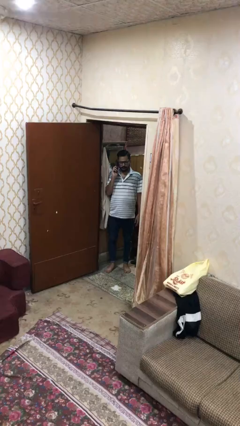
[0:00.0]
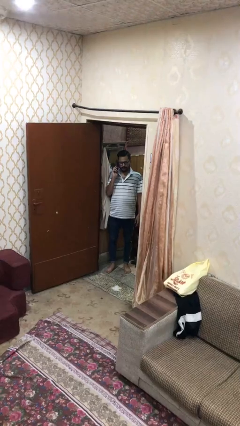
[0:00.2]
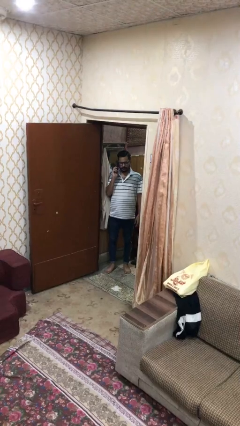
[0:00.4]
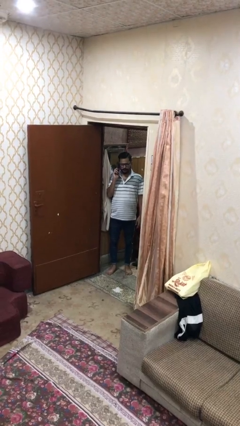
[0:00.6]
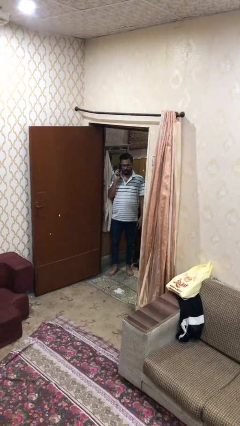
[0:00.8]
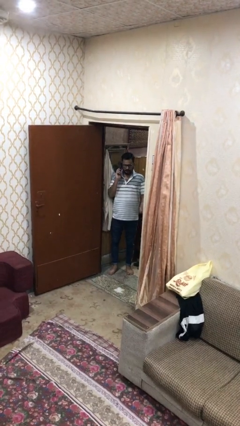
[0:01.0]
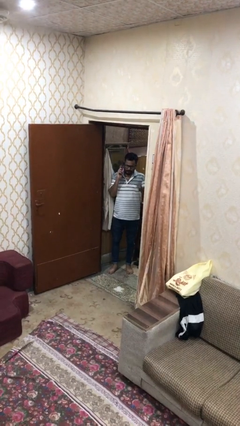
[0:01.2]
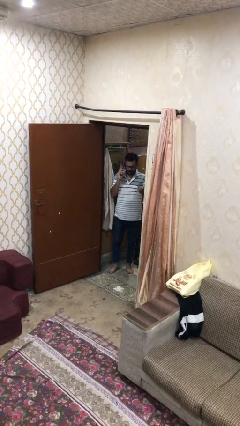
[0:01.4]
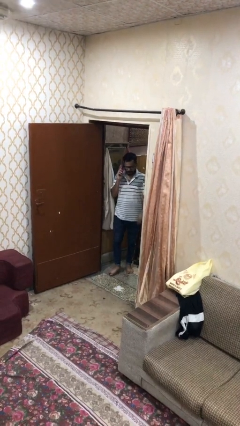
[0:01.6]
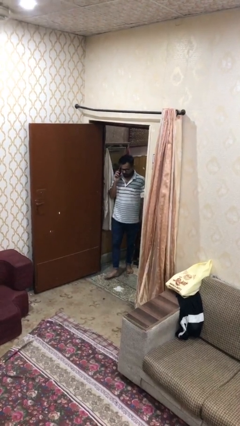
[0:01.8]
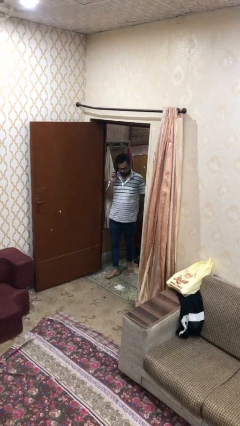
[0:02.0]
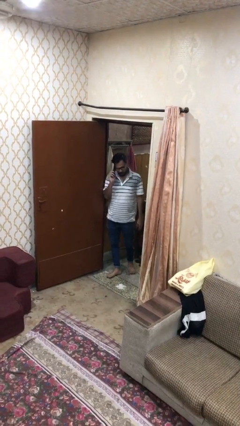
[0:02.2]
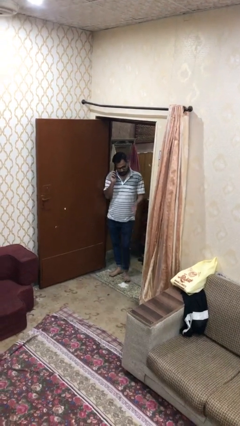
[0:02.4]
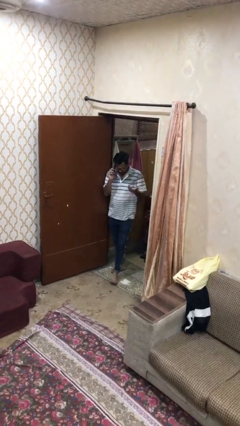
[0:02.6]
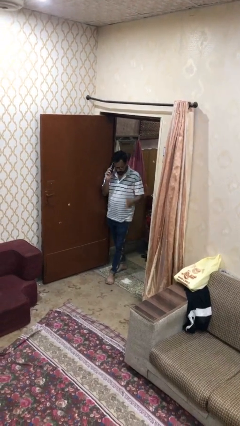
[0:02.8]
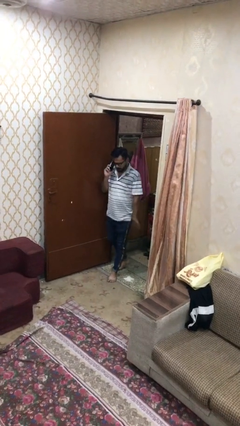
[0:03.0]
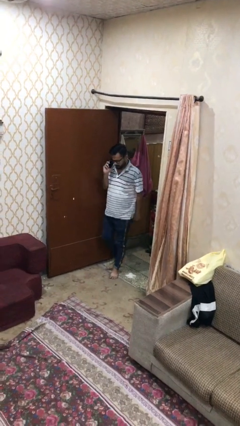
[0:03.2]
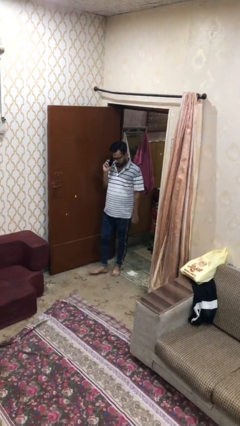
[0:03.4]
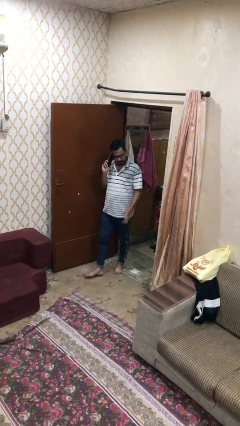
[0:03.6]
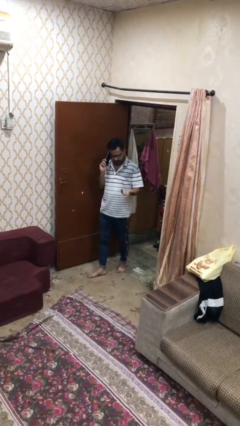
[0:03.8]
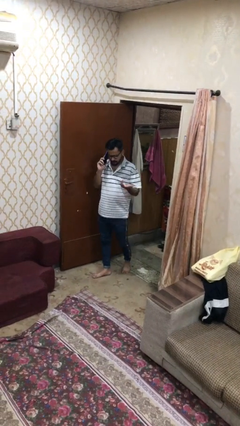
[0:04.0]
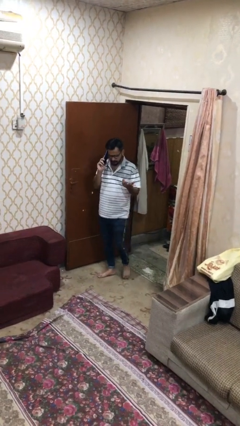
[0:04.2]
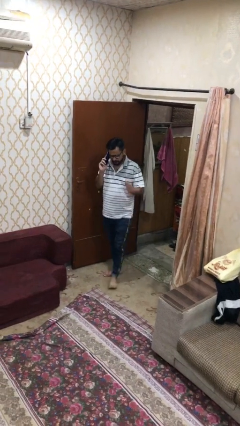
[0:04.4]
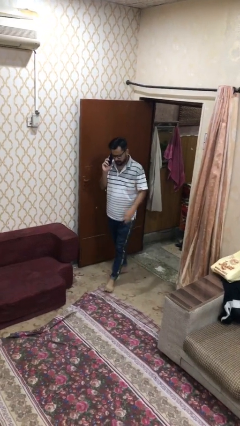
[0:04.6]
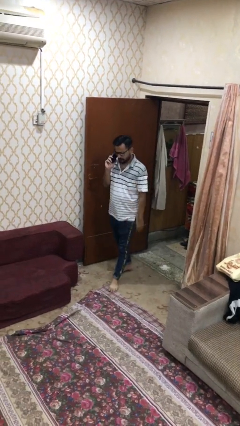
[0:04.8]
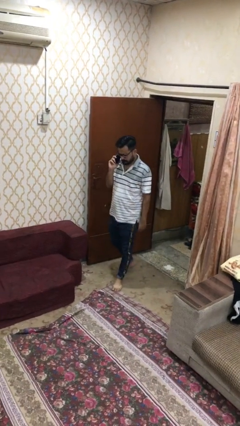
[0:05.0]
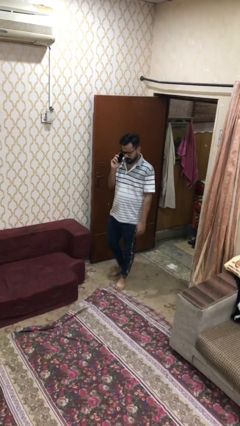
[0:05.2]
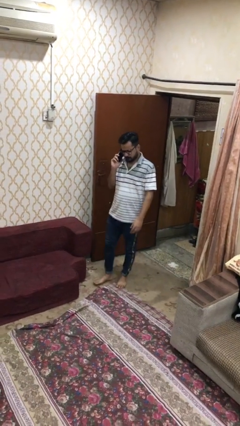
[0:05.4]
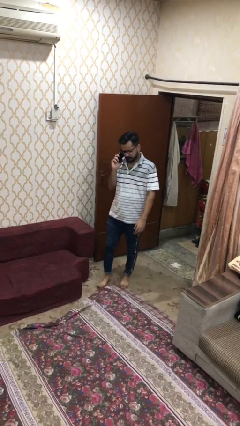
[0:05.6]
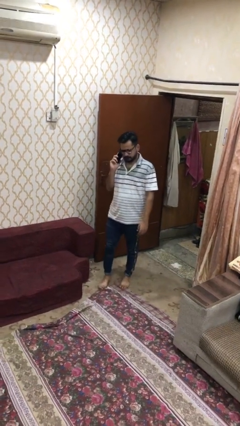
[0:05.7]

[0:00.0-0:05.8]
person enters scene through structure

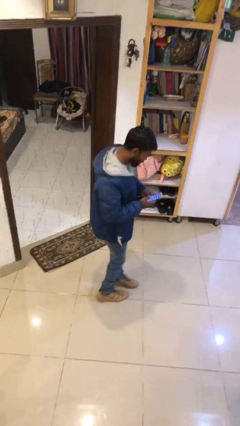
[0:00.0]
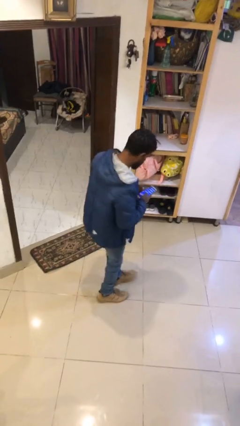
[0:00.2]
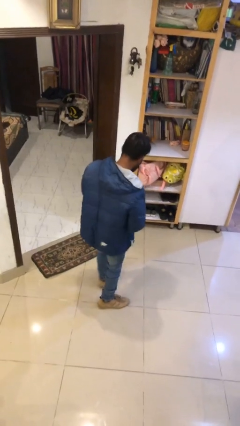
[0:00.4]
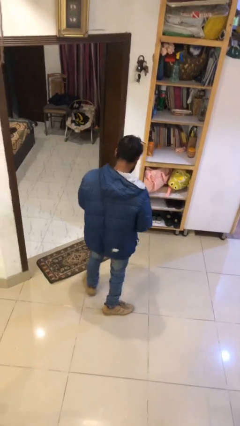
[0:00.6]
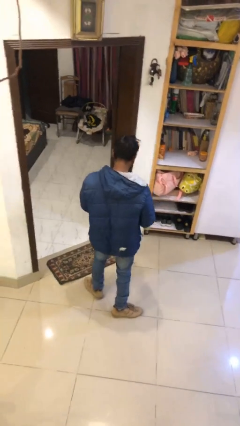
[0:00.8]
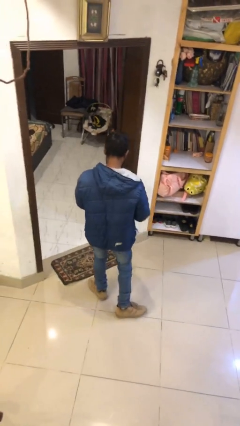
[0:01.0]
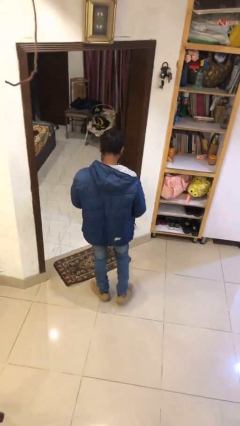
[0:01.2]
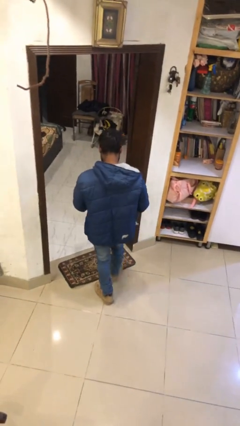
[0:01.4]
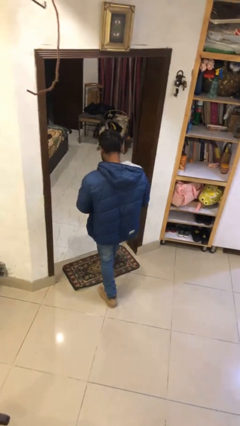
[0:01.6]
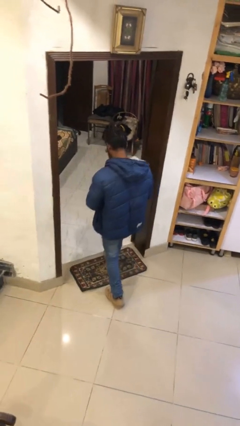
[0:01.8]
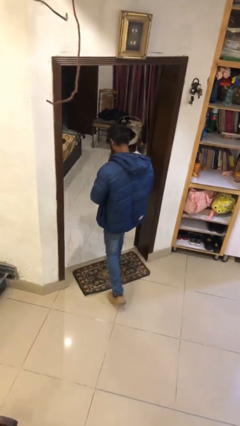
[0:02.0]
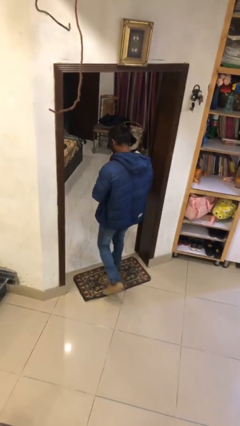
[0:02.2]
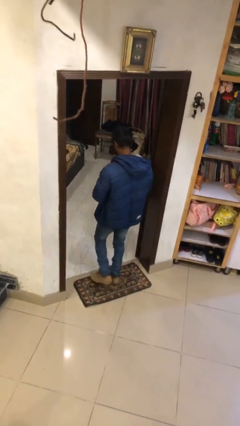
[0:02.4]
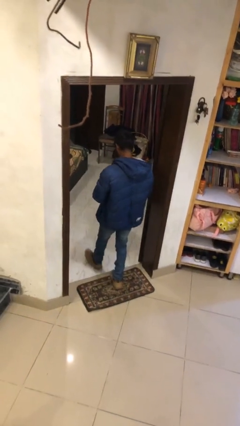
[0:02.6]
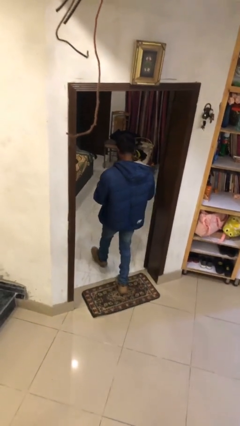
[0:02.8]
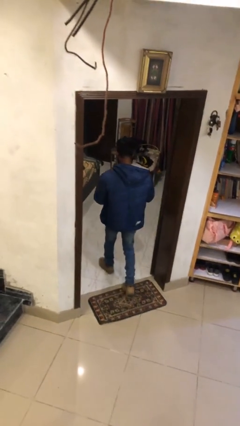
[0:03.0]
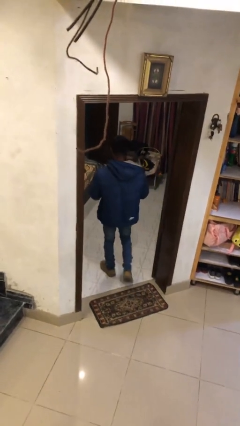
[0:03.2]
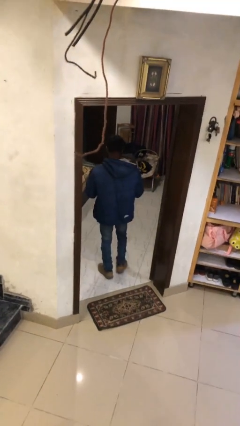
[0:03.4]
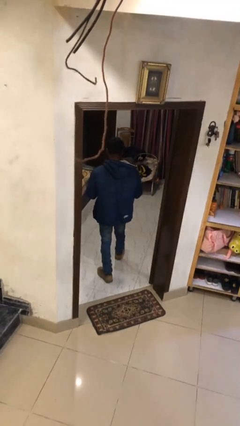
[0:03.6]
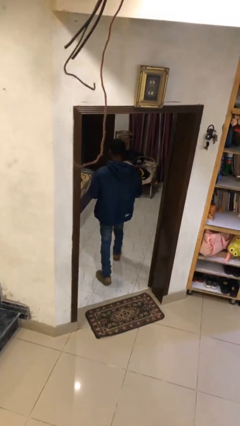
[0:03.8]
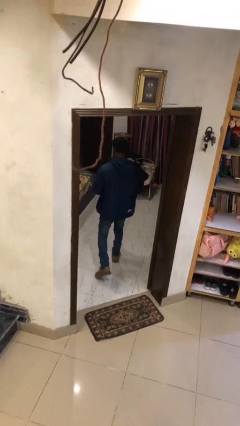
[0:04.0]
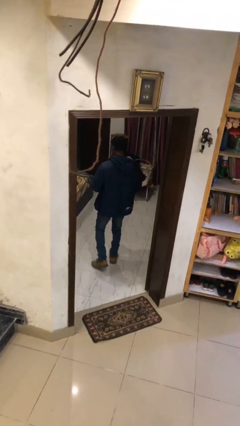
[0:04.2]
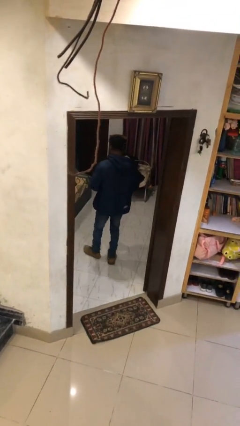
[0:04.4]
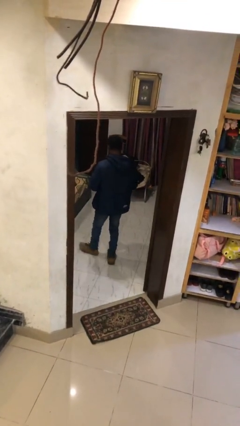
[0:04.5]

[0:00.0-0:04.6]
person exits scene through structure

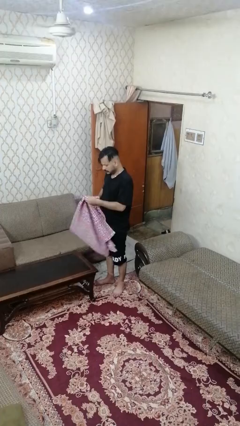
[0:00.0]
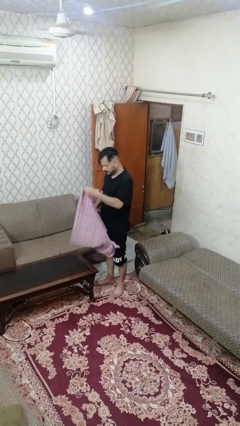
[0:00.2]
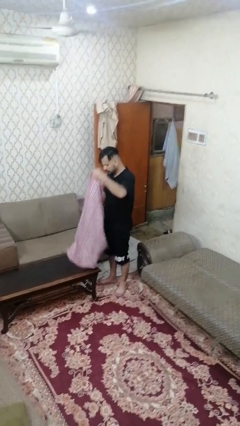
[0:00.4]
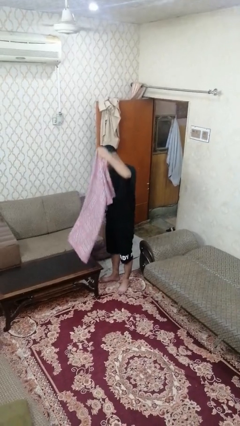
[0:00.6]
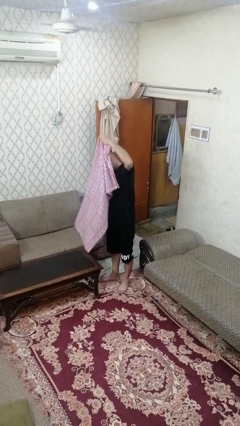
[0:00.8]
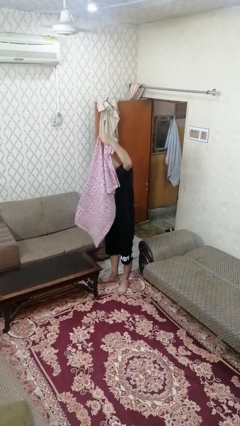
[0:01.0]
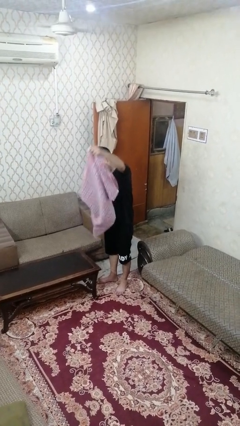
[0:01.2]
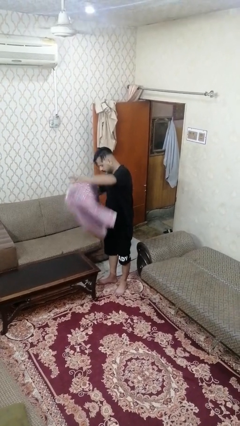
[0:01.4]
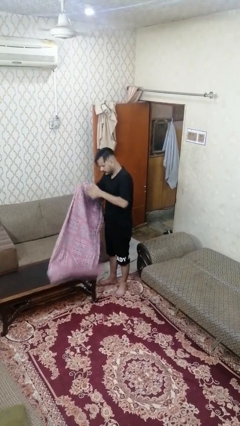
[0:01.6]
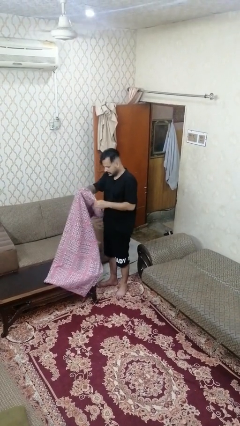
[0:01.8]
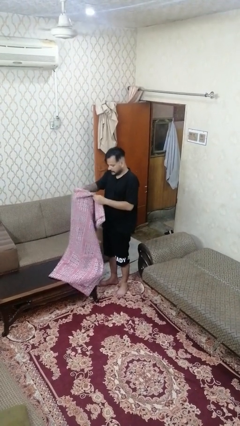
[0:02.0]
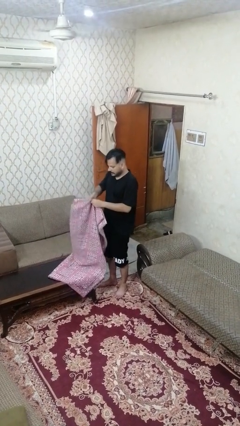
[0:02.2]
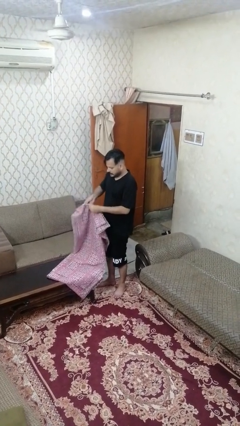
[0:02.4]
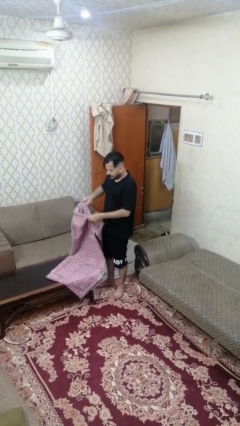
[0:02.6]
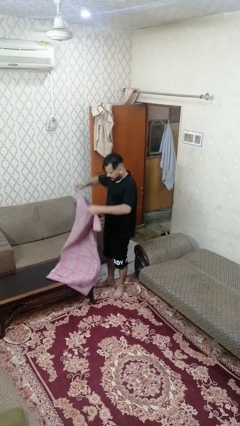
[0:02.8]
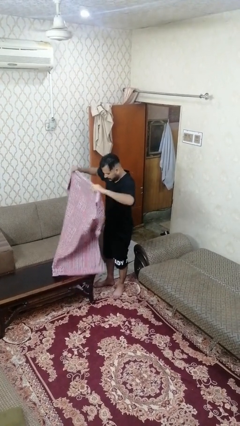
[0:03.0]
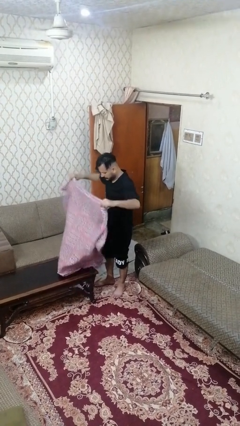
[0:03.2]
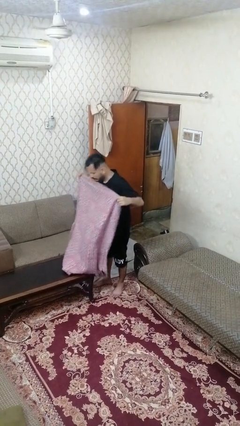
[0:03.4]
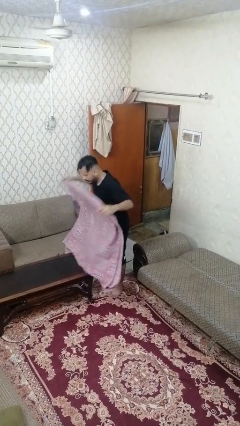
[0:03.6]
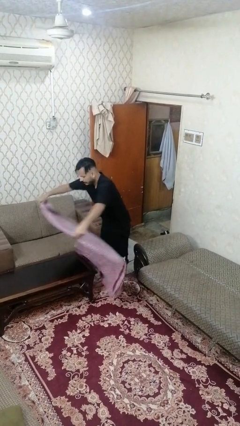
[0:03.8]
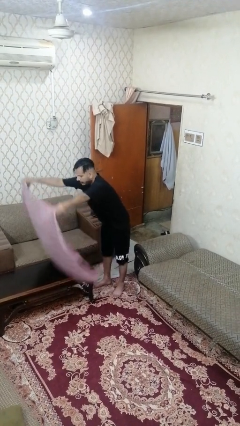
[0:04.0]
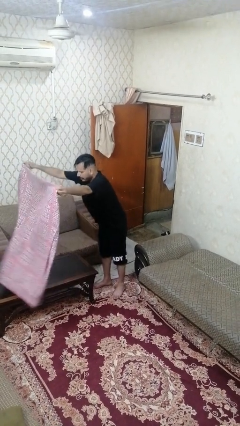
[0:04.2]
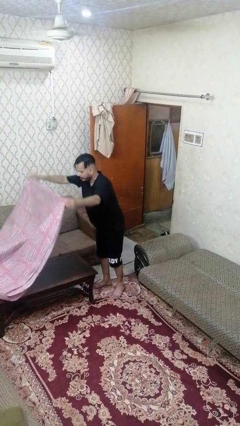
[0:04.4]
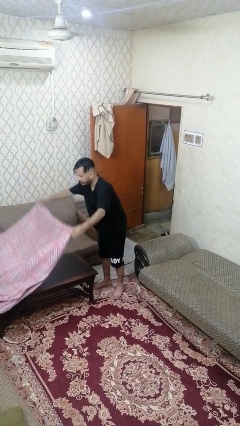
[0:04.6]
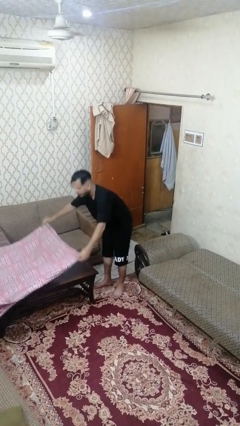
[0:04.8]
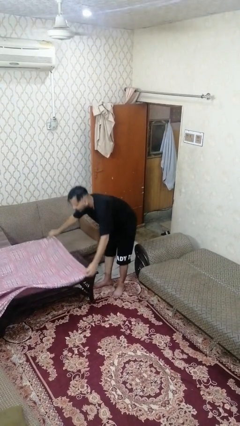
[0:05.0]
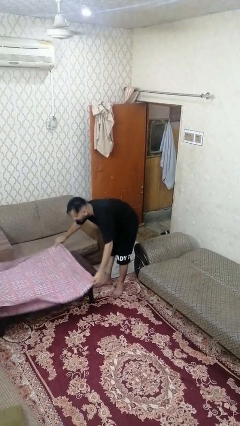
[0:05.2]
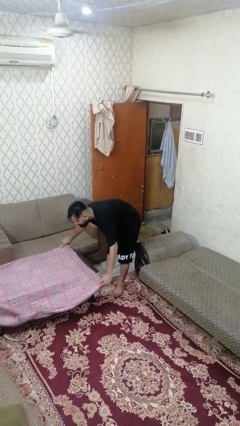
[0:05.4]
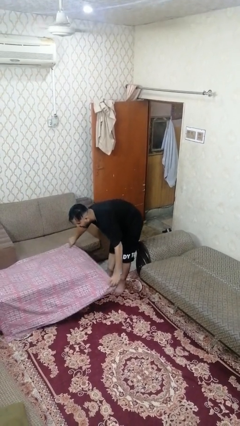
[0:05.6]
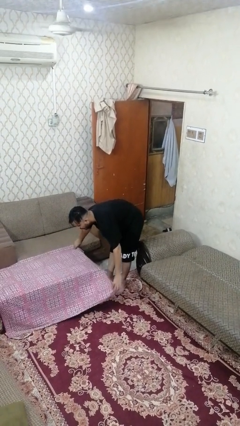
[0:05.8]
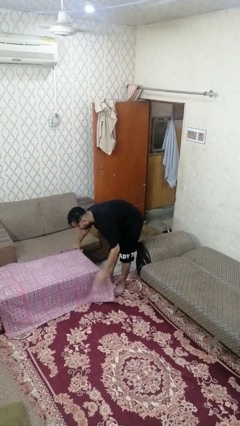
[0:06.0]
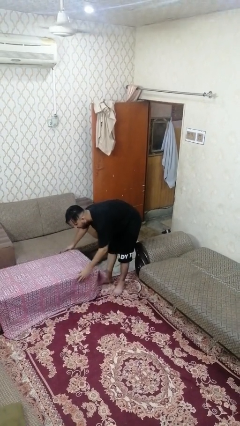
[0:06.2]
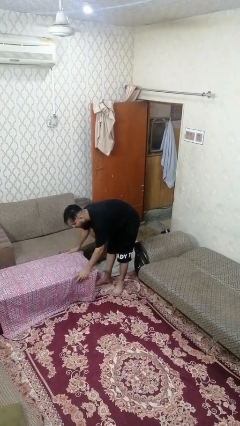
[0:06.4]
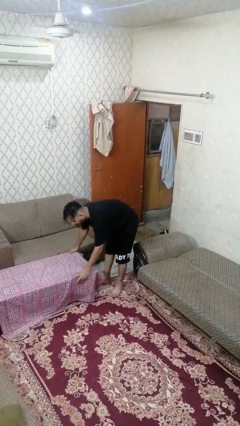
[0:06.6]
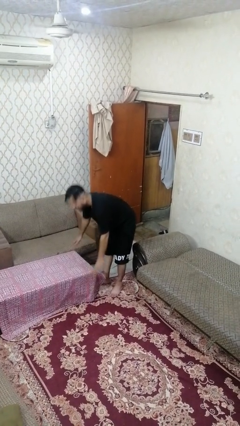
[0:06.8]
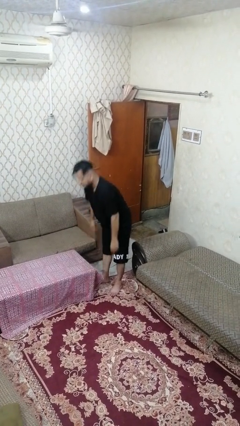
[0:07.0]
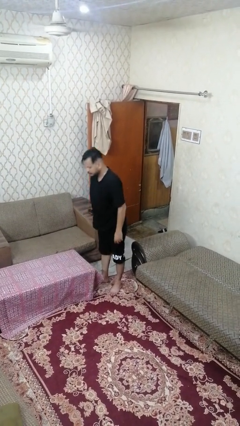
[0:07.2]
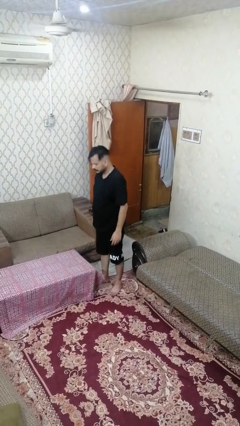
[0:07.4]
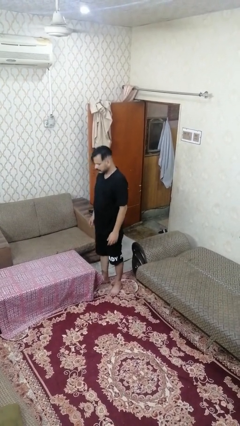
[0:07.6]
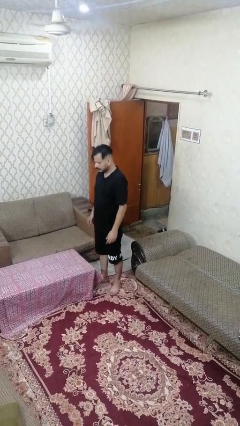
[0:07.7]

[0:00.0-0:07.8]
person spreads tablecloth
